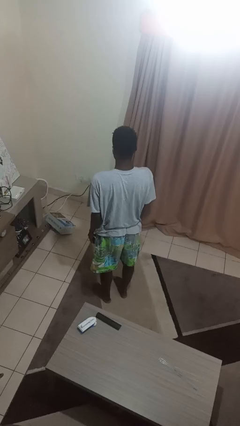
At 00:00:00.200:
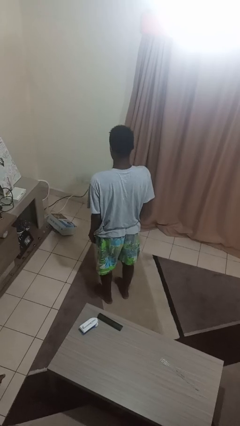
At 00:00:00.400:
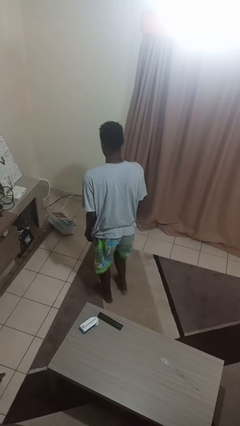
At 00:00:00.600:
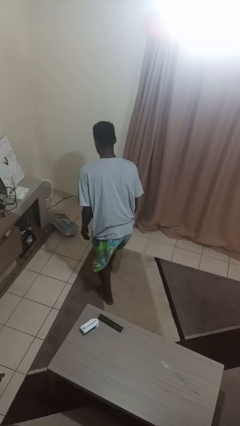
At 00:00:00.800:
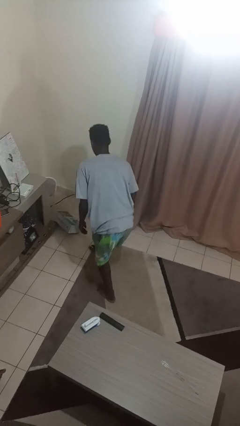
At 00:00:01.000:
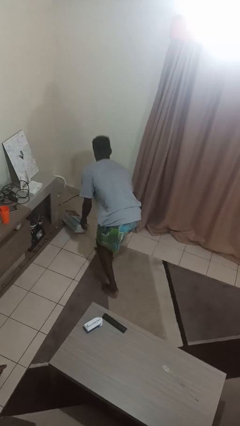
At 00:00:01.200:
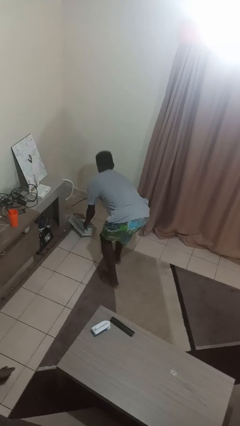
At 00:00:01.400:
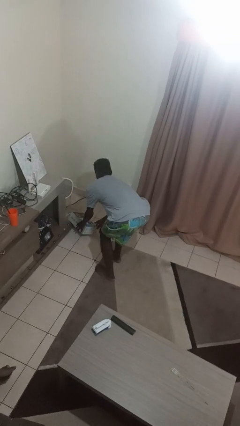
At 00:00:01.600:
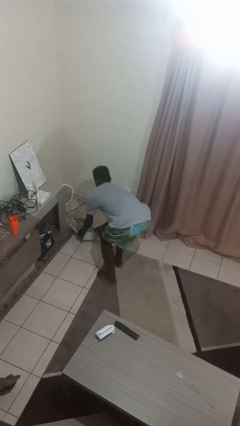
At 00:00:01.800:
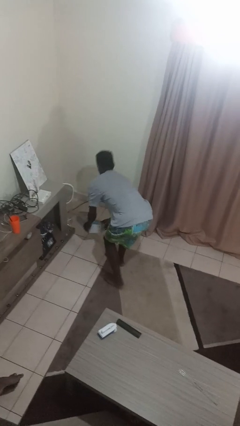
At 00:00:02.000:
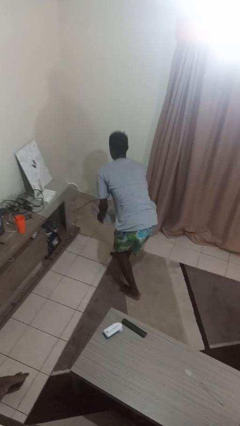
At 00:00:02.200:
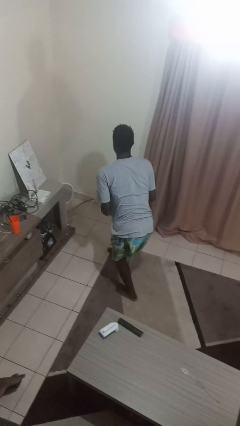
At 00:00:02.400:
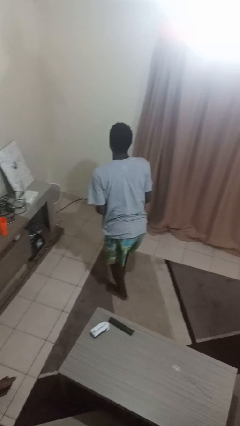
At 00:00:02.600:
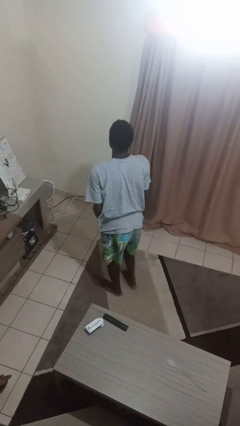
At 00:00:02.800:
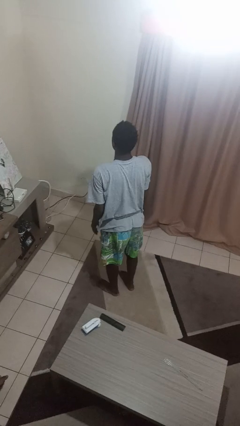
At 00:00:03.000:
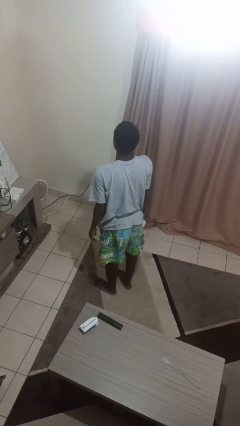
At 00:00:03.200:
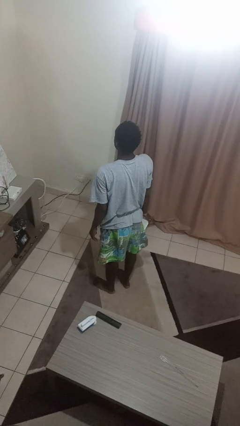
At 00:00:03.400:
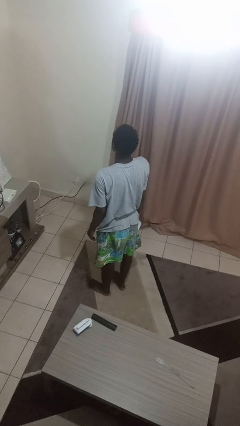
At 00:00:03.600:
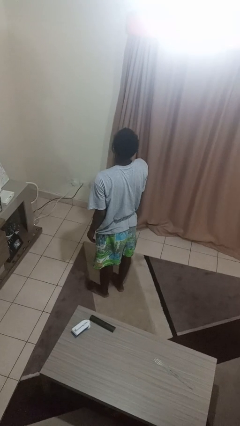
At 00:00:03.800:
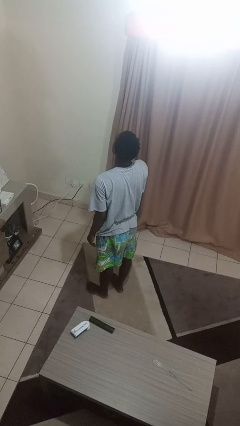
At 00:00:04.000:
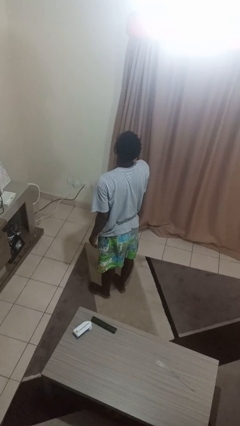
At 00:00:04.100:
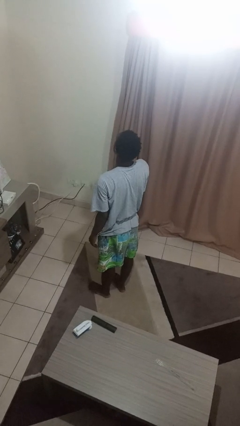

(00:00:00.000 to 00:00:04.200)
person picks up object from floor

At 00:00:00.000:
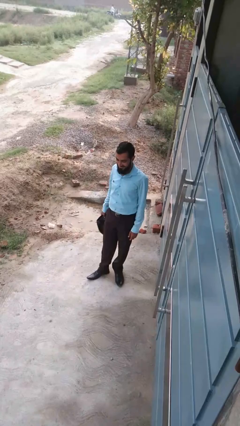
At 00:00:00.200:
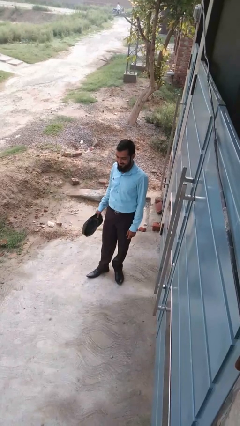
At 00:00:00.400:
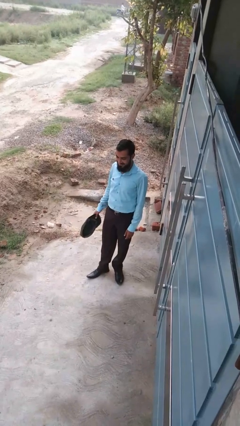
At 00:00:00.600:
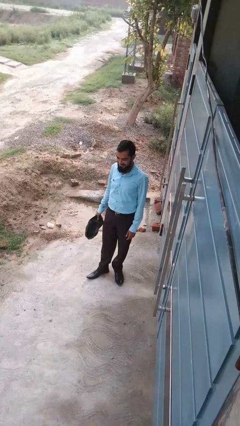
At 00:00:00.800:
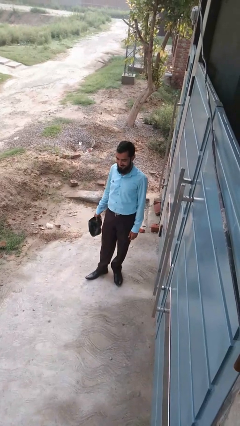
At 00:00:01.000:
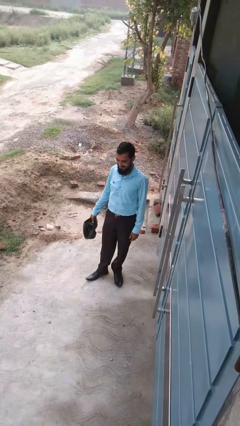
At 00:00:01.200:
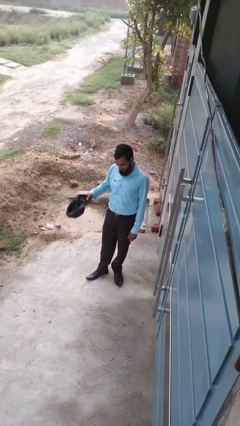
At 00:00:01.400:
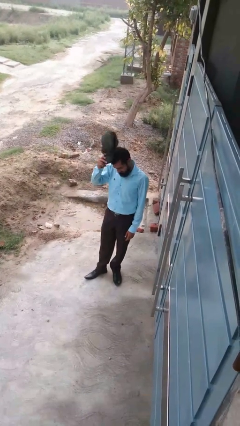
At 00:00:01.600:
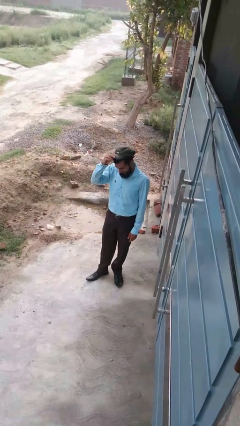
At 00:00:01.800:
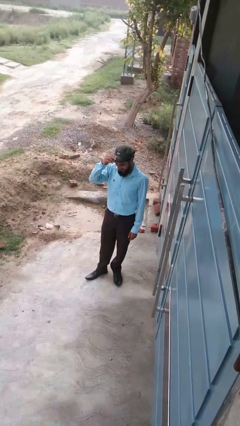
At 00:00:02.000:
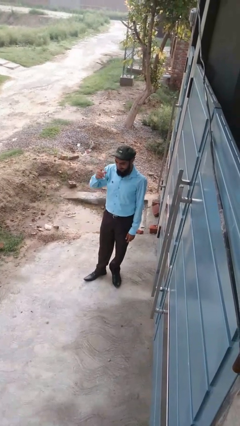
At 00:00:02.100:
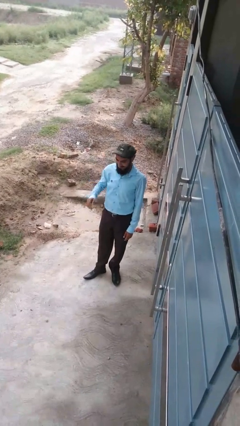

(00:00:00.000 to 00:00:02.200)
person puts on hat

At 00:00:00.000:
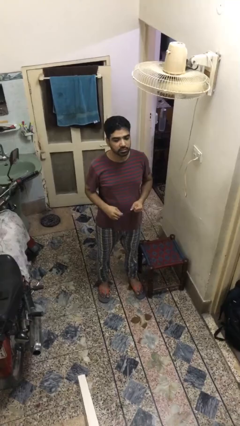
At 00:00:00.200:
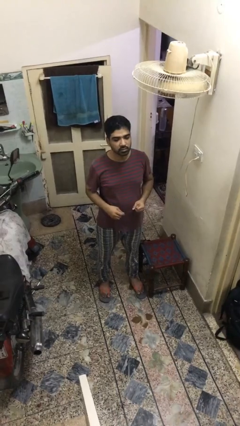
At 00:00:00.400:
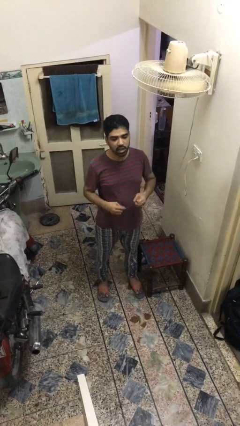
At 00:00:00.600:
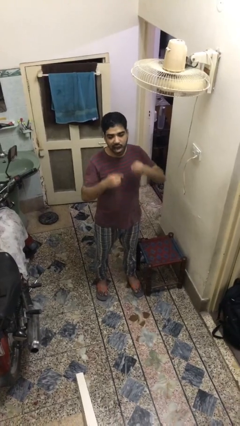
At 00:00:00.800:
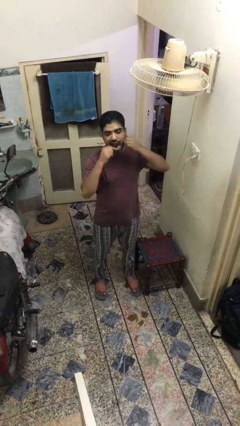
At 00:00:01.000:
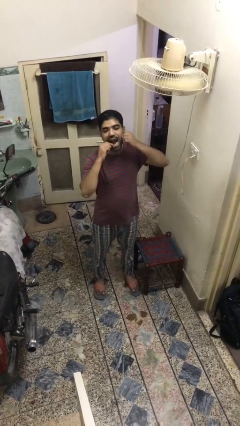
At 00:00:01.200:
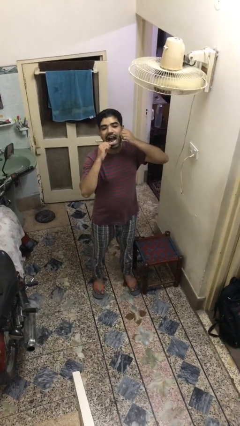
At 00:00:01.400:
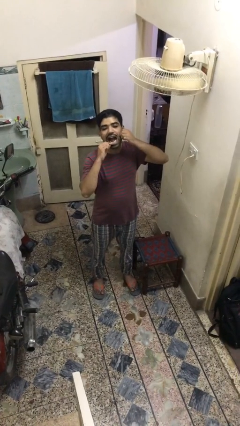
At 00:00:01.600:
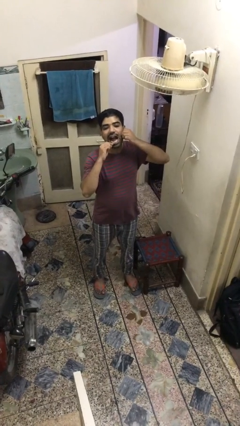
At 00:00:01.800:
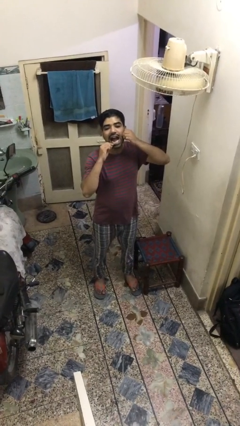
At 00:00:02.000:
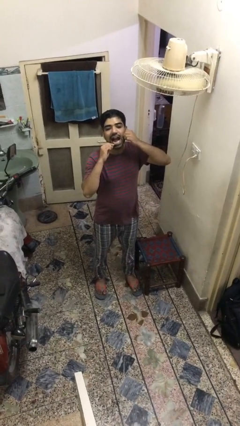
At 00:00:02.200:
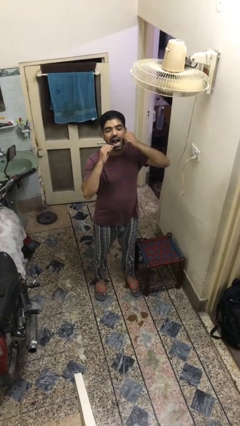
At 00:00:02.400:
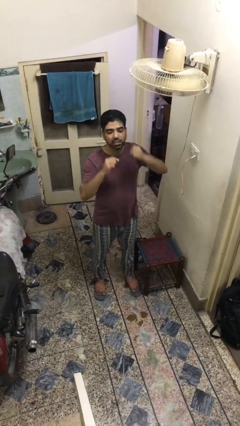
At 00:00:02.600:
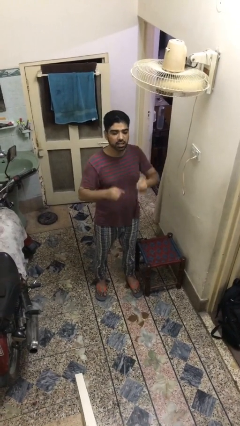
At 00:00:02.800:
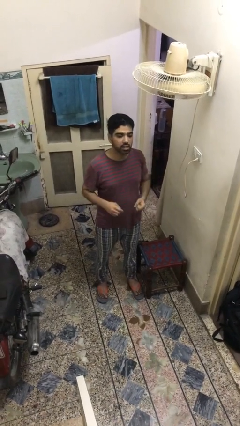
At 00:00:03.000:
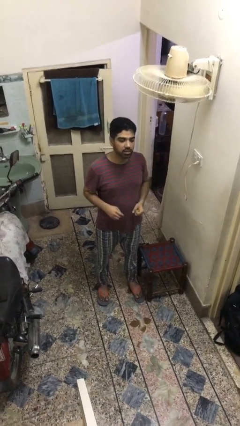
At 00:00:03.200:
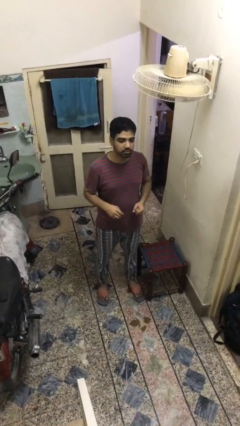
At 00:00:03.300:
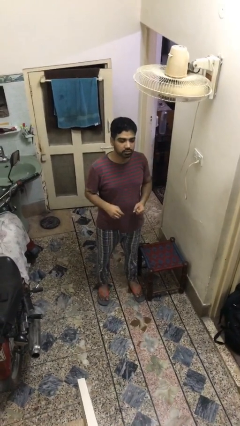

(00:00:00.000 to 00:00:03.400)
person flosses

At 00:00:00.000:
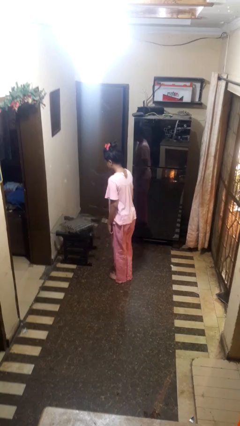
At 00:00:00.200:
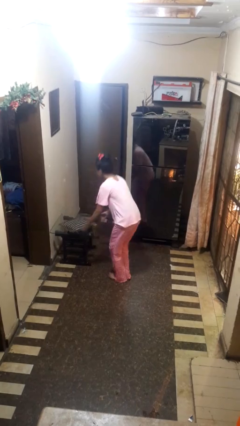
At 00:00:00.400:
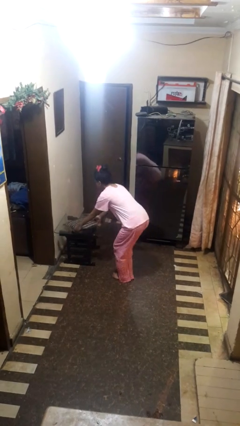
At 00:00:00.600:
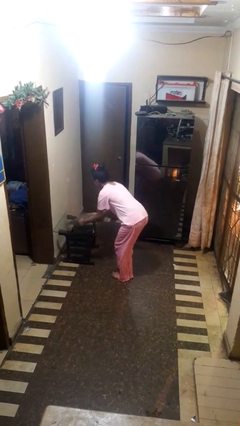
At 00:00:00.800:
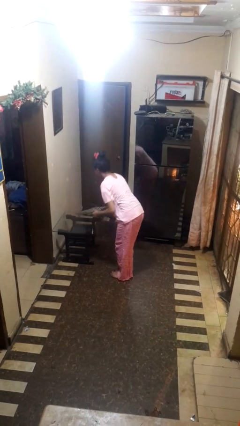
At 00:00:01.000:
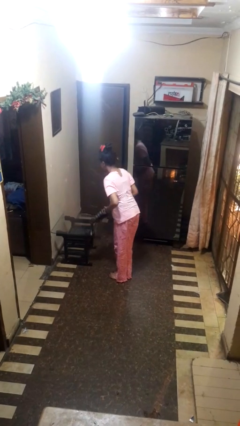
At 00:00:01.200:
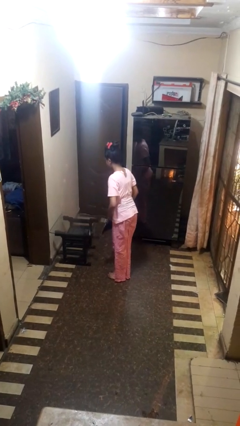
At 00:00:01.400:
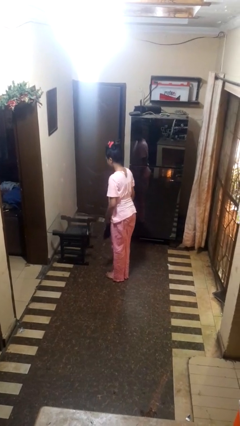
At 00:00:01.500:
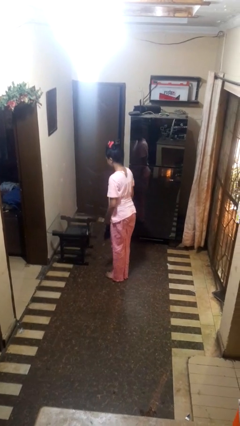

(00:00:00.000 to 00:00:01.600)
person picks up object from table

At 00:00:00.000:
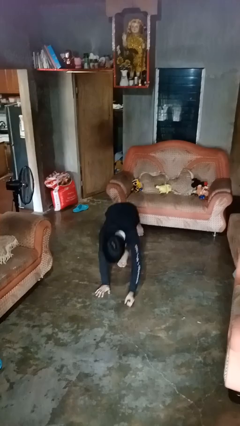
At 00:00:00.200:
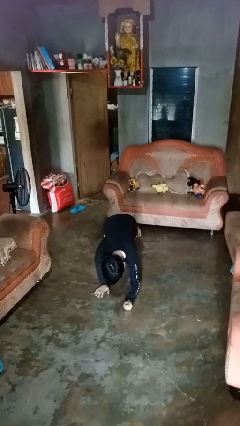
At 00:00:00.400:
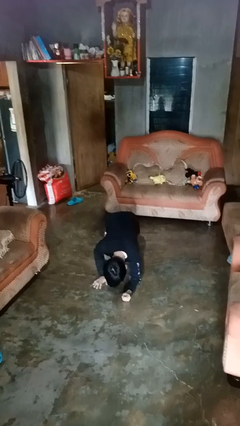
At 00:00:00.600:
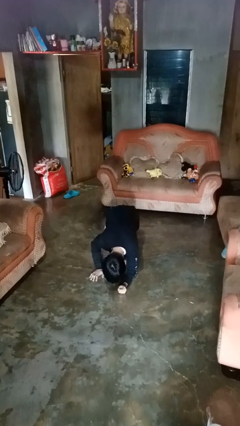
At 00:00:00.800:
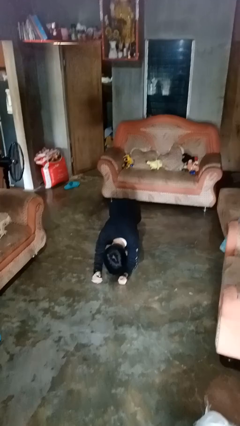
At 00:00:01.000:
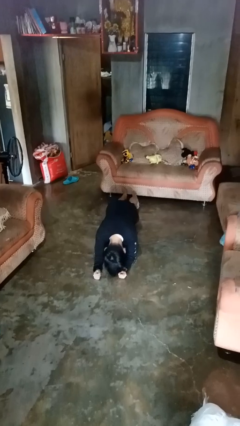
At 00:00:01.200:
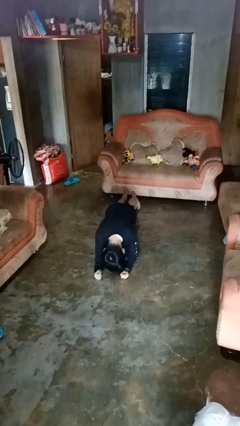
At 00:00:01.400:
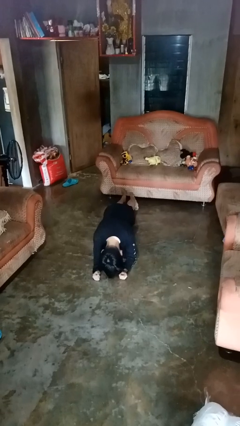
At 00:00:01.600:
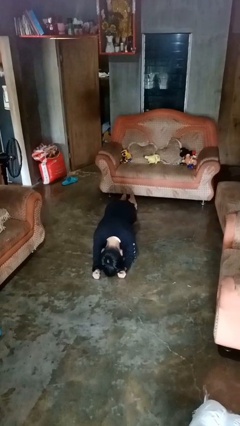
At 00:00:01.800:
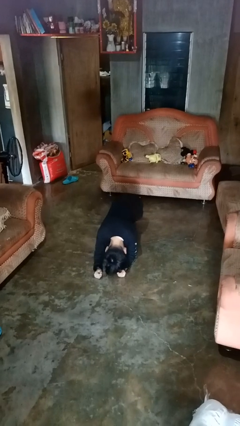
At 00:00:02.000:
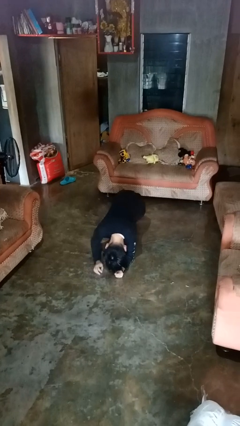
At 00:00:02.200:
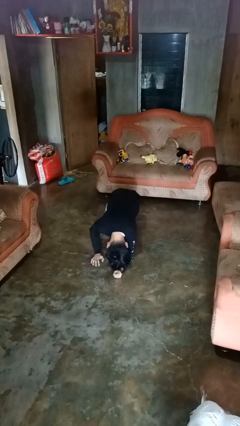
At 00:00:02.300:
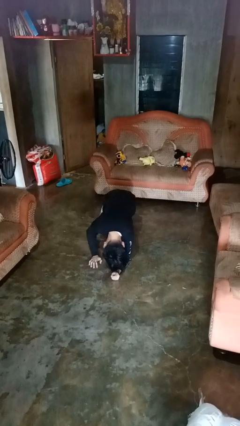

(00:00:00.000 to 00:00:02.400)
person exercises with plank

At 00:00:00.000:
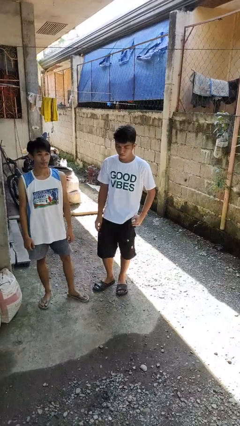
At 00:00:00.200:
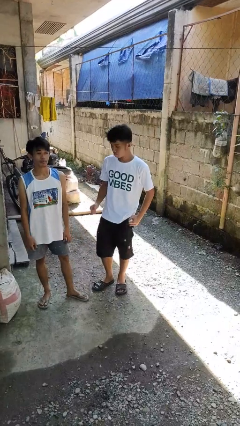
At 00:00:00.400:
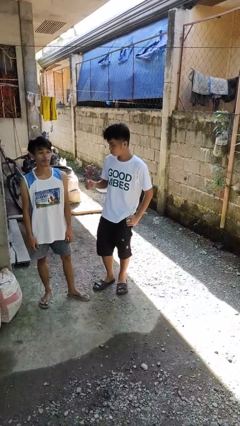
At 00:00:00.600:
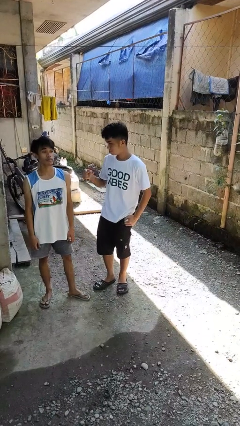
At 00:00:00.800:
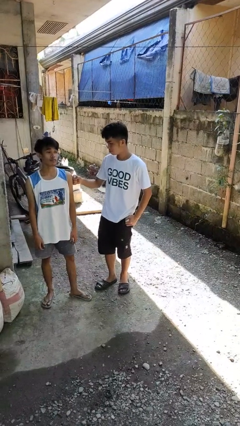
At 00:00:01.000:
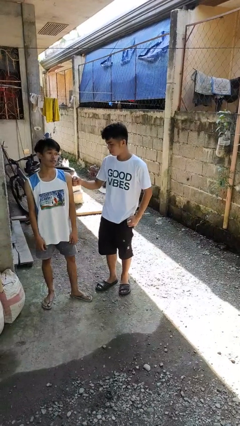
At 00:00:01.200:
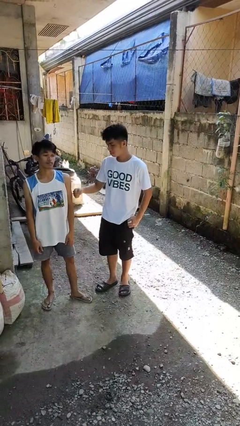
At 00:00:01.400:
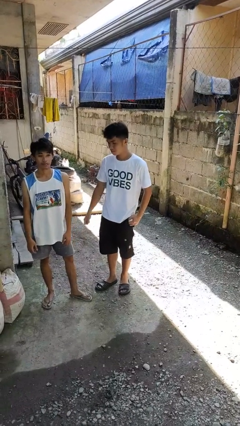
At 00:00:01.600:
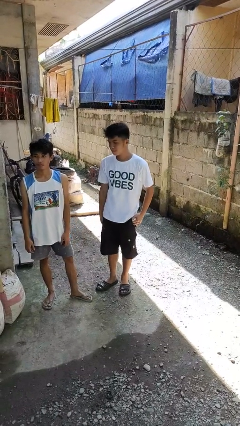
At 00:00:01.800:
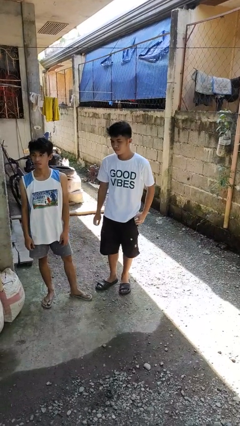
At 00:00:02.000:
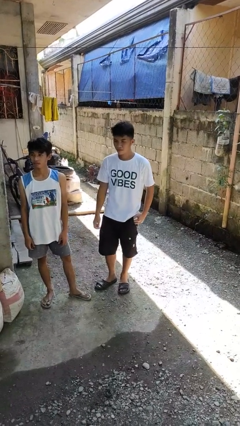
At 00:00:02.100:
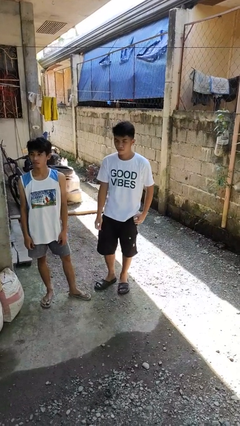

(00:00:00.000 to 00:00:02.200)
person pounds shoulders of person

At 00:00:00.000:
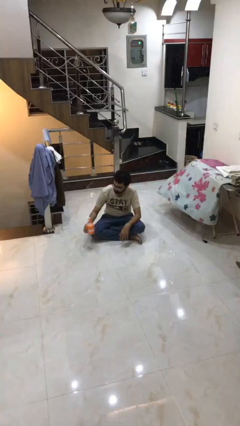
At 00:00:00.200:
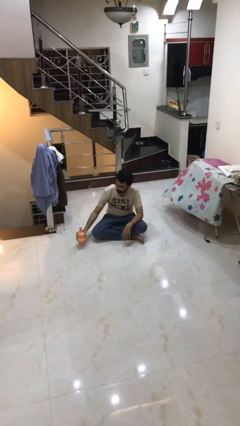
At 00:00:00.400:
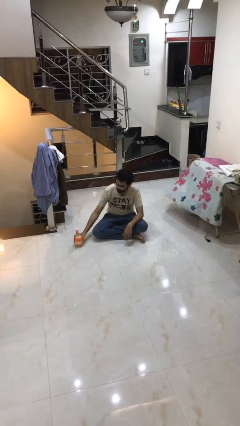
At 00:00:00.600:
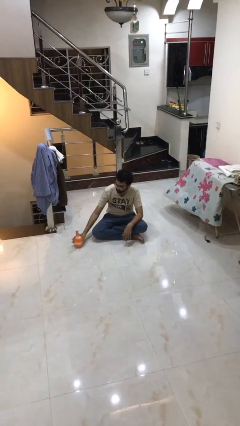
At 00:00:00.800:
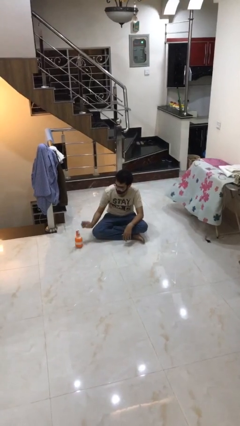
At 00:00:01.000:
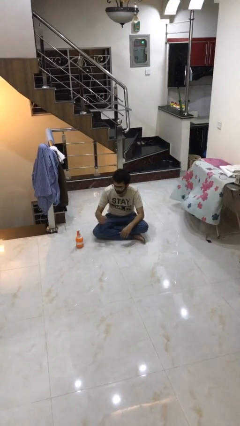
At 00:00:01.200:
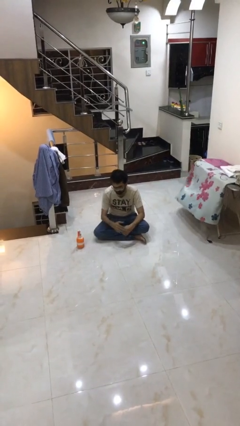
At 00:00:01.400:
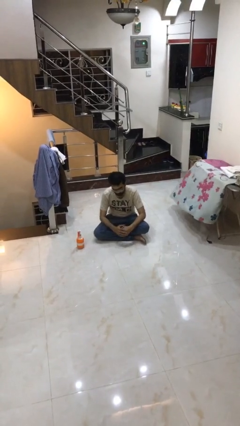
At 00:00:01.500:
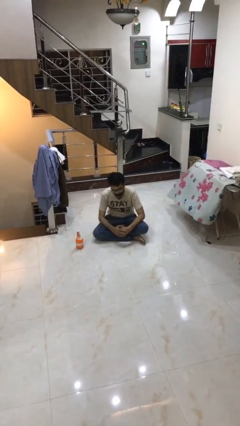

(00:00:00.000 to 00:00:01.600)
person puts down object on floor
